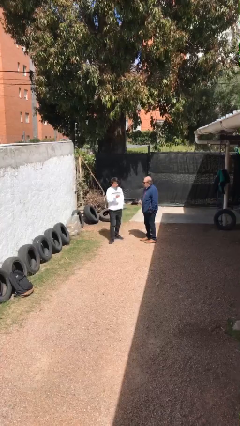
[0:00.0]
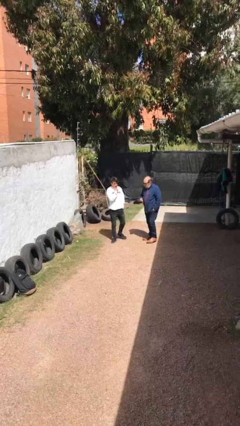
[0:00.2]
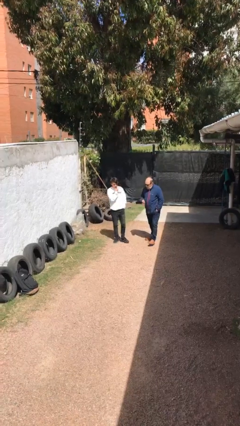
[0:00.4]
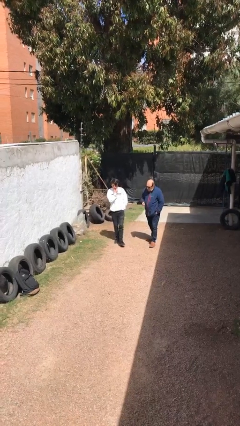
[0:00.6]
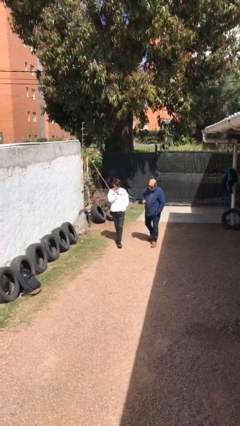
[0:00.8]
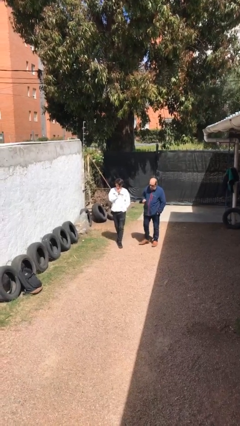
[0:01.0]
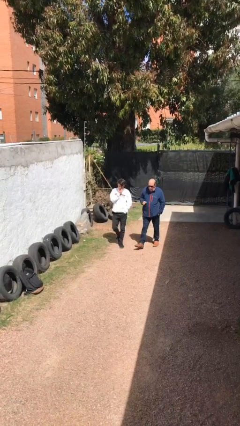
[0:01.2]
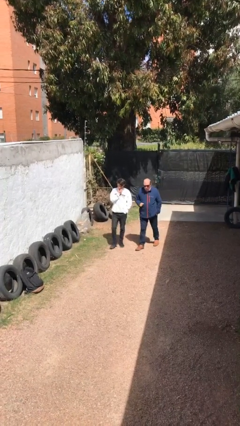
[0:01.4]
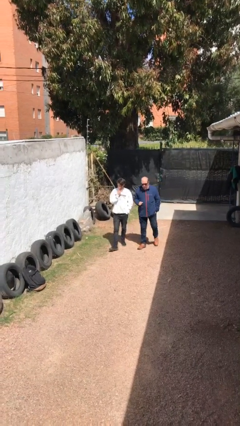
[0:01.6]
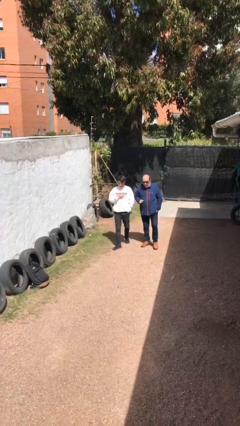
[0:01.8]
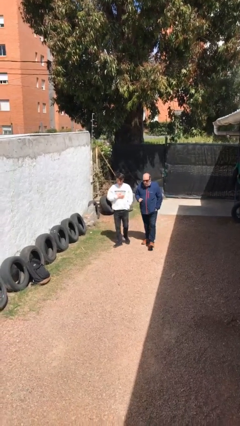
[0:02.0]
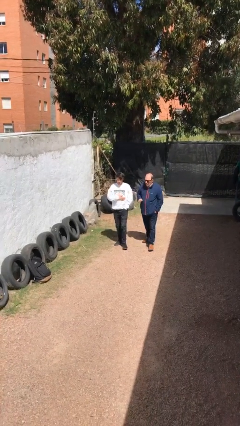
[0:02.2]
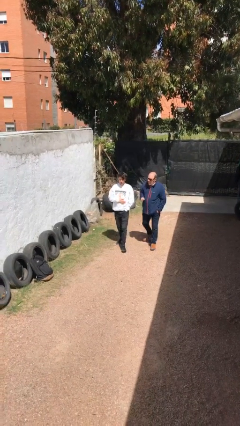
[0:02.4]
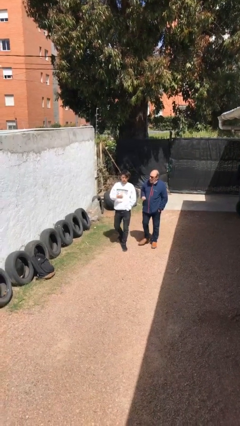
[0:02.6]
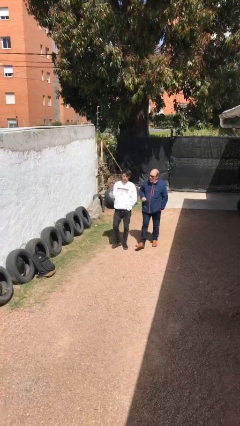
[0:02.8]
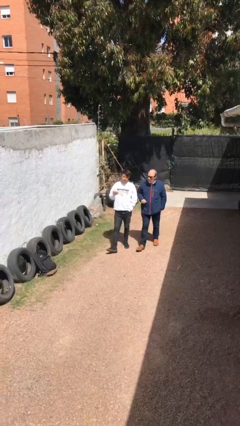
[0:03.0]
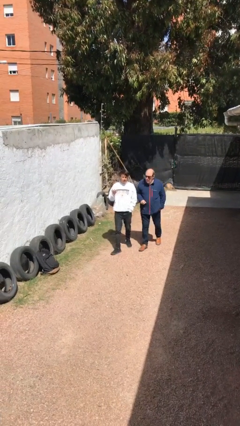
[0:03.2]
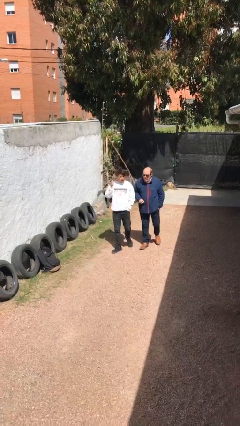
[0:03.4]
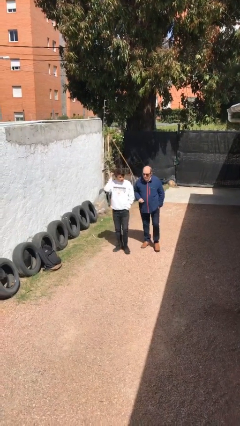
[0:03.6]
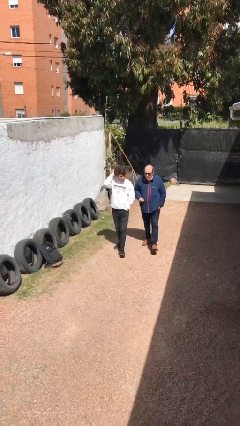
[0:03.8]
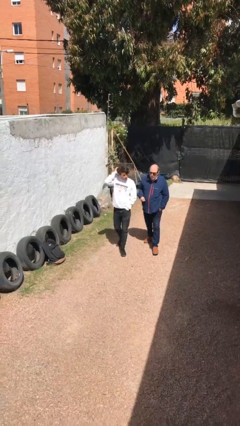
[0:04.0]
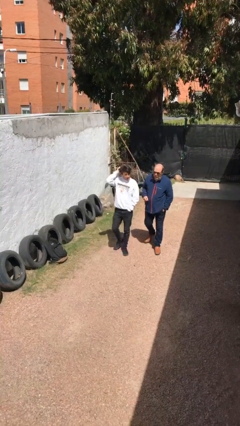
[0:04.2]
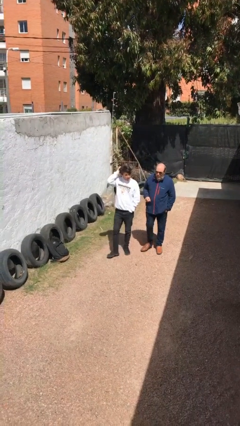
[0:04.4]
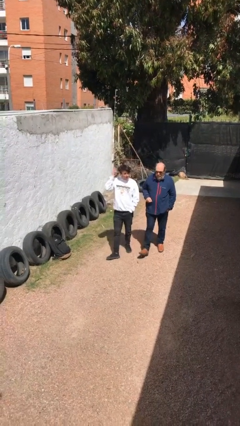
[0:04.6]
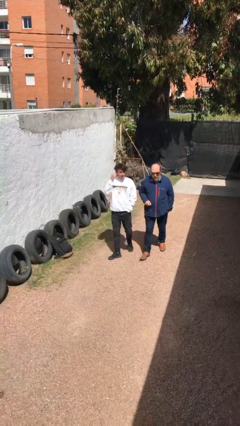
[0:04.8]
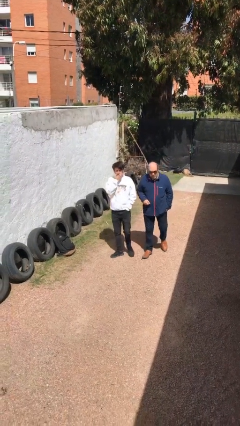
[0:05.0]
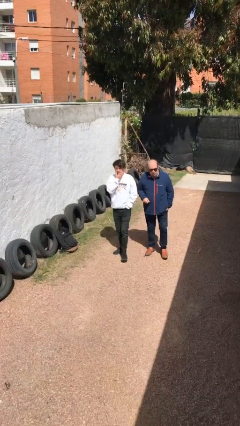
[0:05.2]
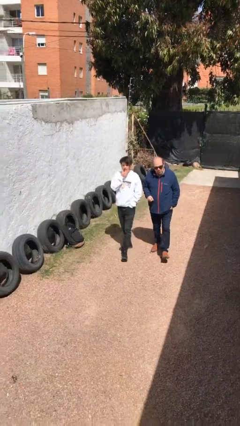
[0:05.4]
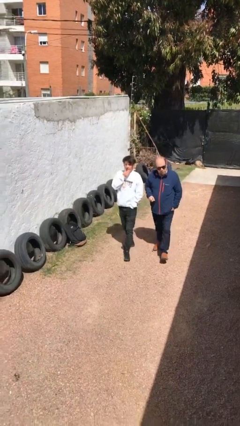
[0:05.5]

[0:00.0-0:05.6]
person talks to person

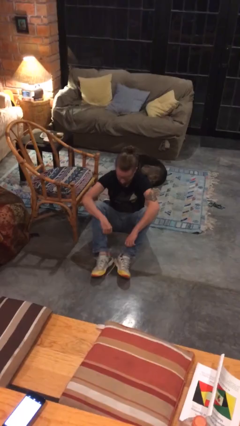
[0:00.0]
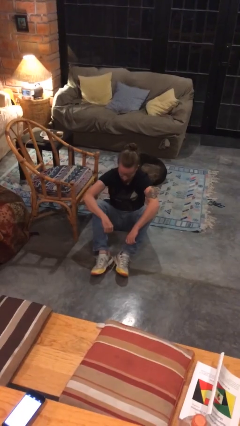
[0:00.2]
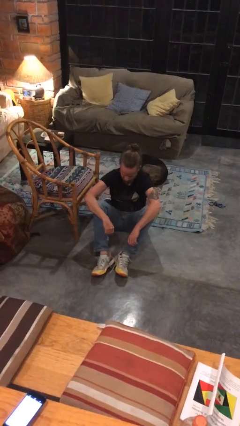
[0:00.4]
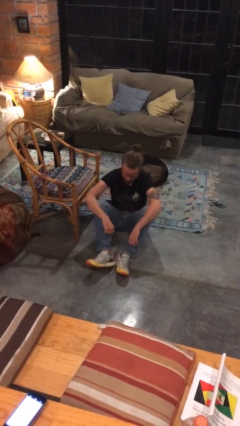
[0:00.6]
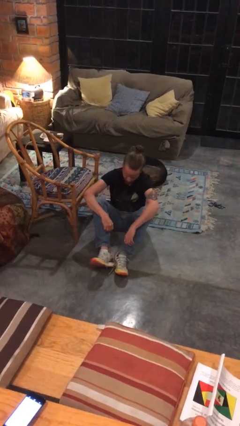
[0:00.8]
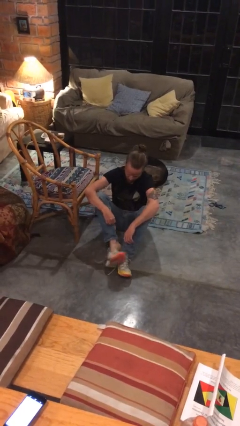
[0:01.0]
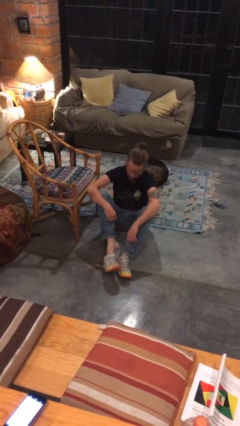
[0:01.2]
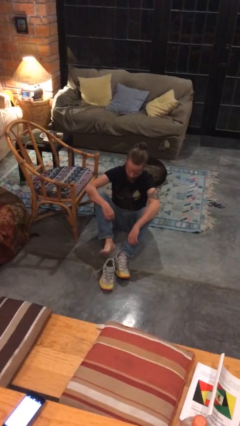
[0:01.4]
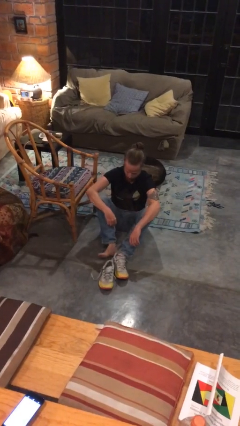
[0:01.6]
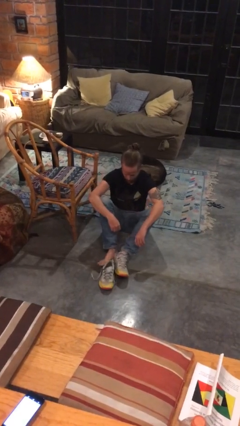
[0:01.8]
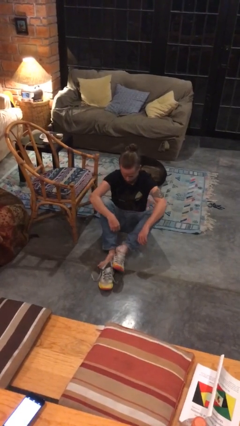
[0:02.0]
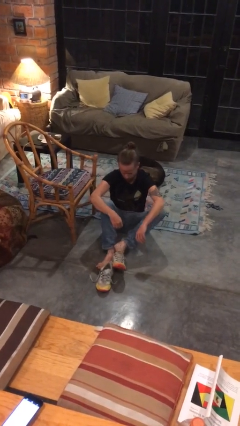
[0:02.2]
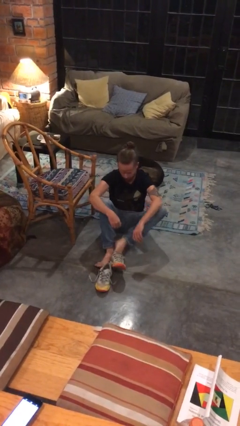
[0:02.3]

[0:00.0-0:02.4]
person takes off shoes

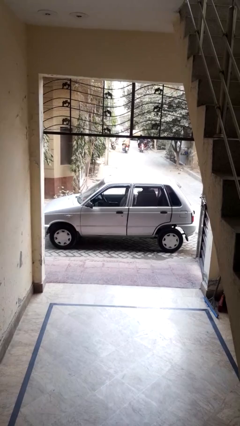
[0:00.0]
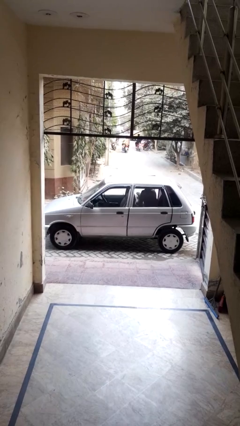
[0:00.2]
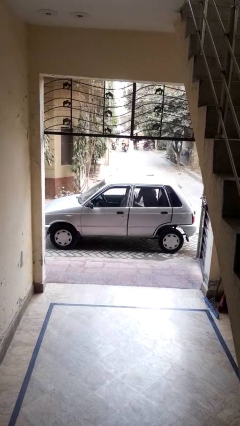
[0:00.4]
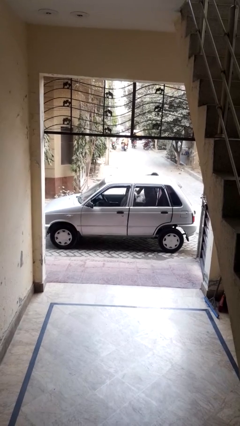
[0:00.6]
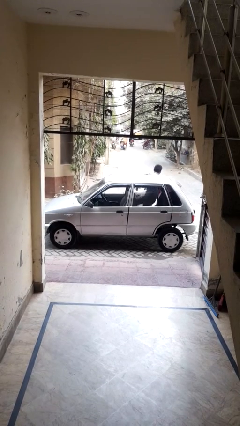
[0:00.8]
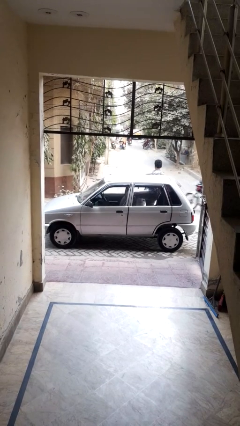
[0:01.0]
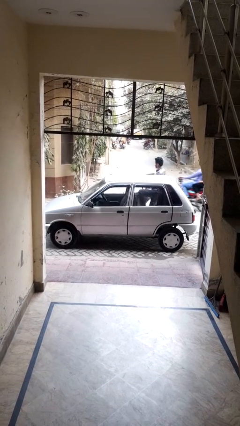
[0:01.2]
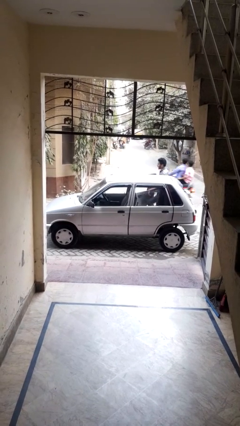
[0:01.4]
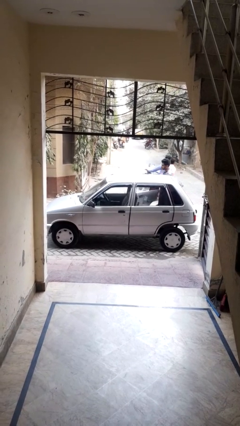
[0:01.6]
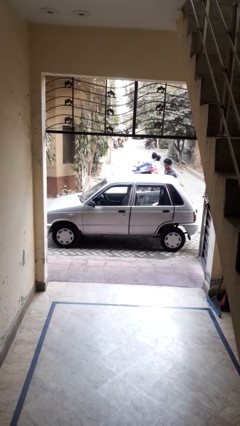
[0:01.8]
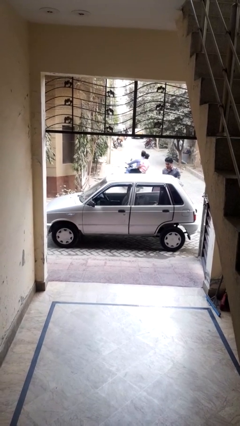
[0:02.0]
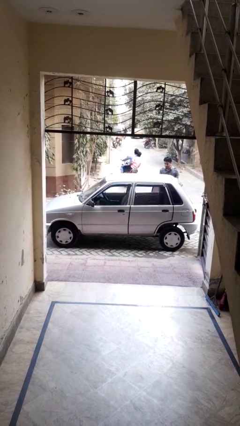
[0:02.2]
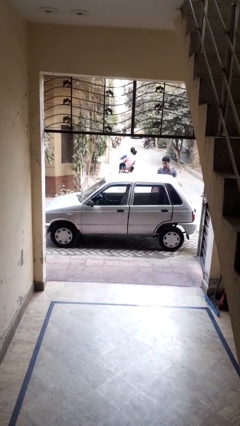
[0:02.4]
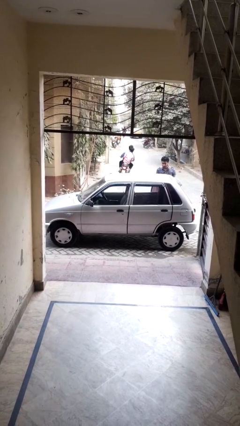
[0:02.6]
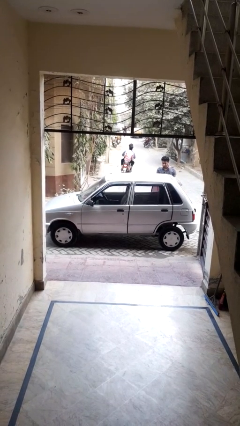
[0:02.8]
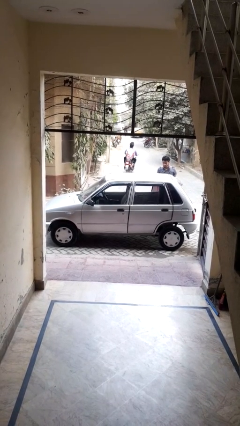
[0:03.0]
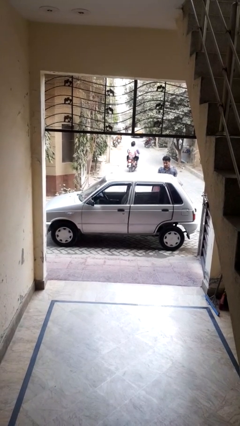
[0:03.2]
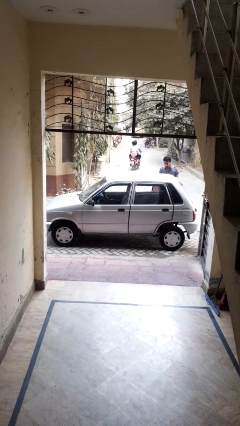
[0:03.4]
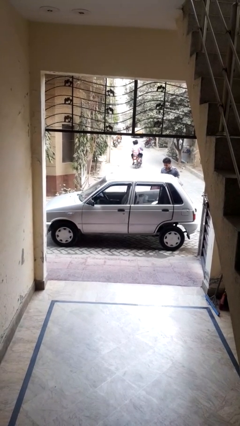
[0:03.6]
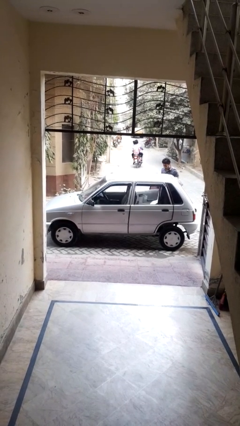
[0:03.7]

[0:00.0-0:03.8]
car drops off person

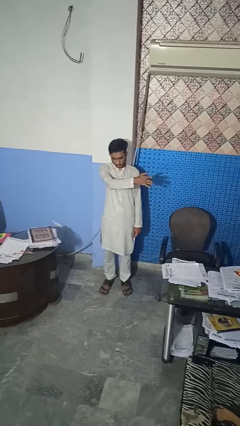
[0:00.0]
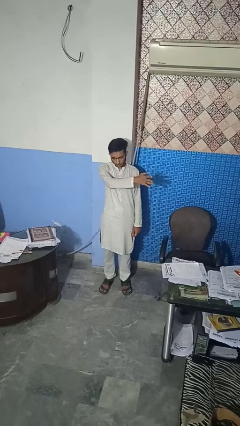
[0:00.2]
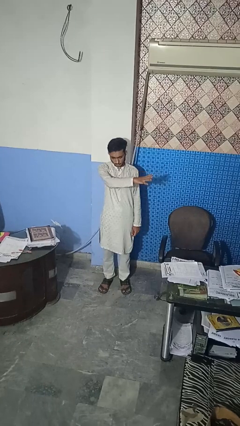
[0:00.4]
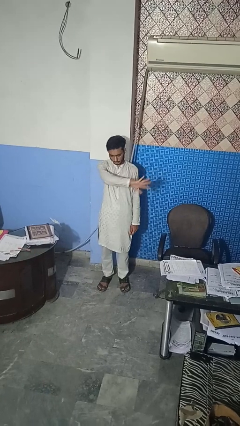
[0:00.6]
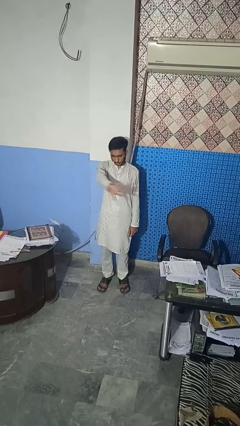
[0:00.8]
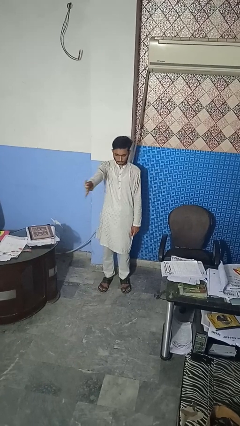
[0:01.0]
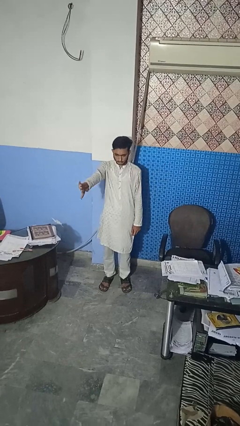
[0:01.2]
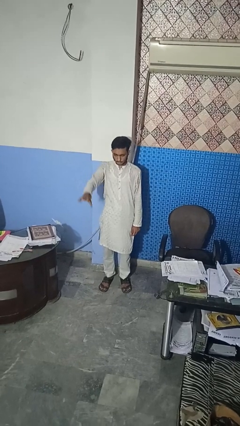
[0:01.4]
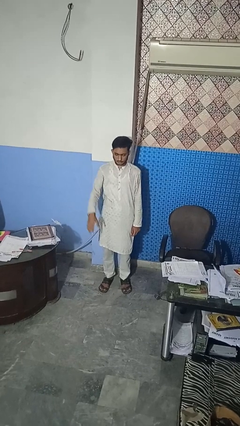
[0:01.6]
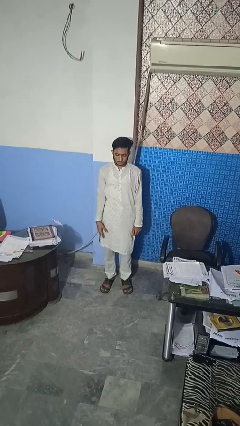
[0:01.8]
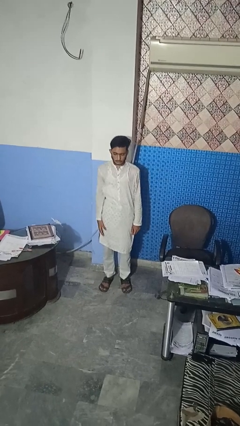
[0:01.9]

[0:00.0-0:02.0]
person gestures swipe right

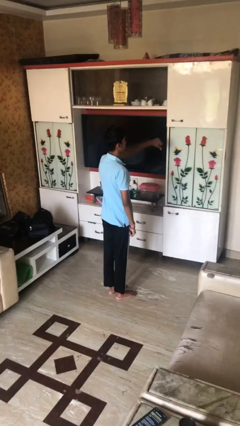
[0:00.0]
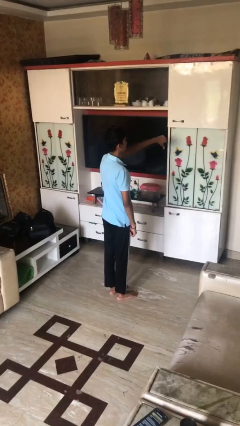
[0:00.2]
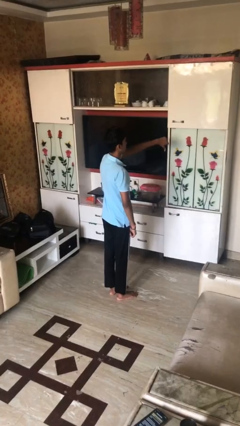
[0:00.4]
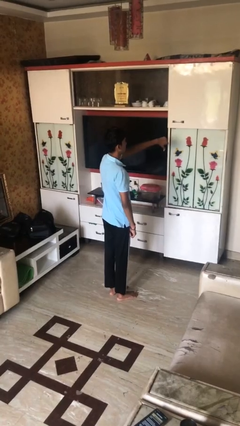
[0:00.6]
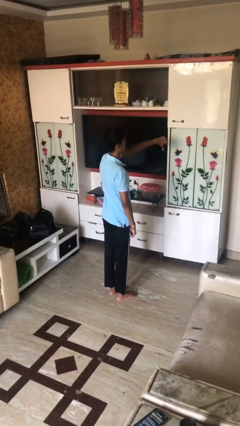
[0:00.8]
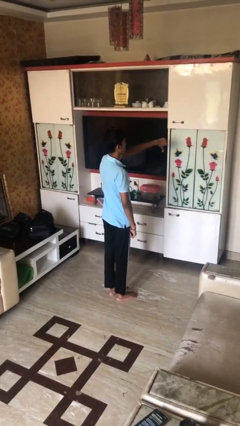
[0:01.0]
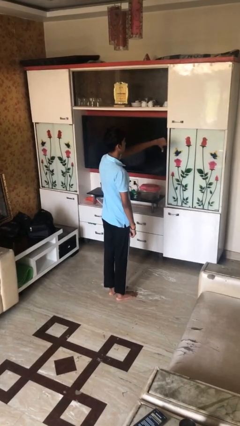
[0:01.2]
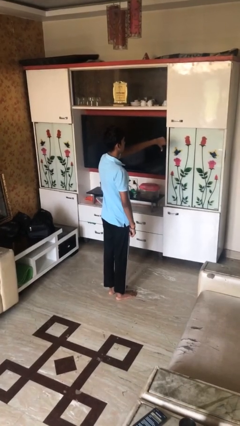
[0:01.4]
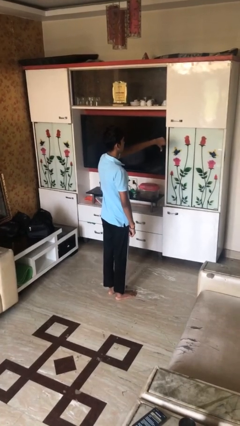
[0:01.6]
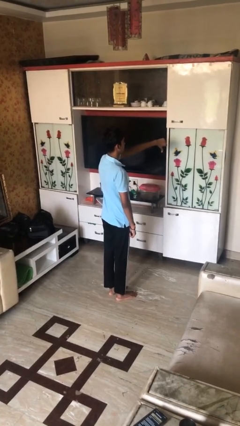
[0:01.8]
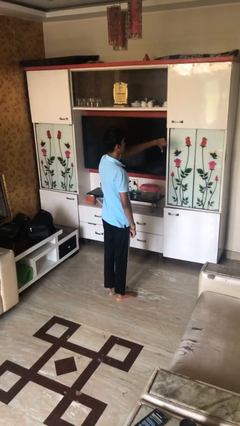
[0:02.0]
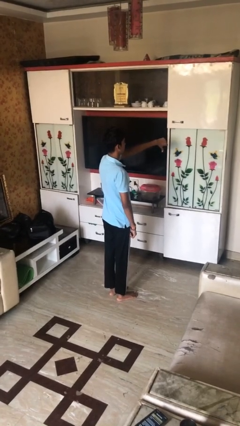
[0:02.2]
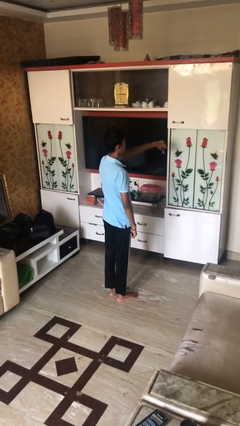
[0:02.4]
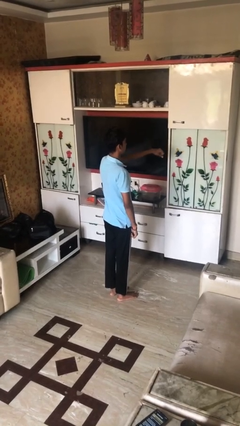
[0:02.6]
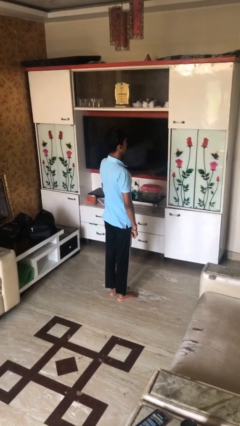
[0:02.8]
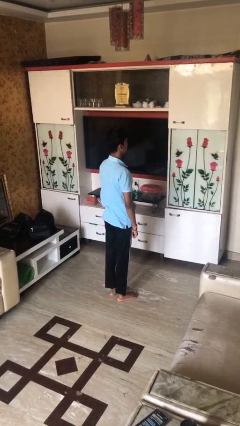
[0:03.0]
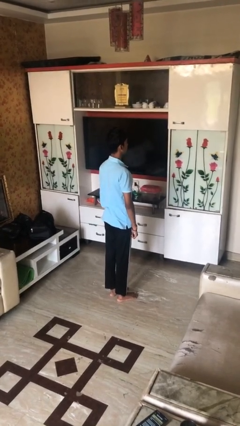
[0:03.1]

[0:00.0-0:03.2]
person gestures thumbs down

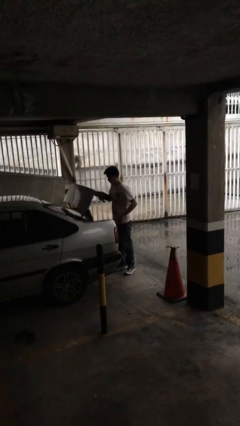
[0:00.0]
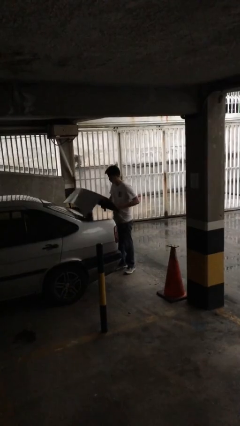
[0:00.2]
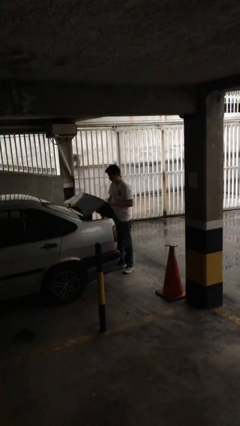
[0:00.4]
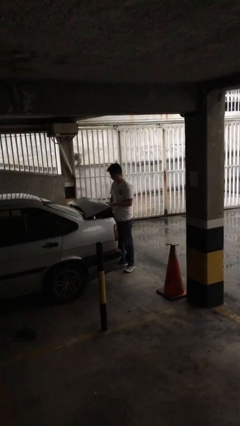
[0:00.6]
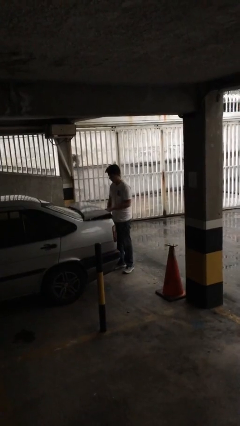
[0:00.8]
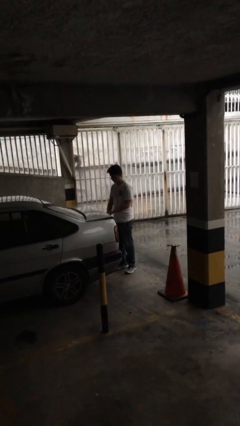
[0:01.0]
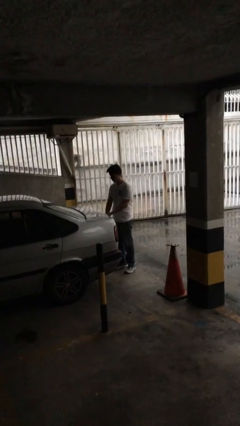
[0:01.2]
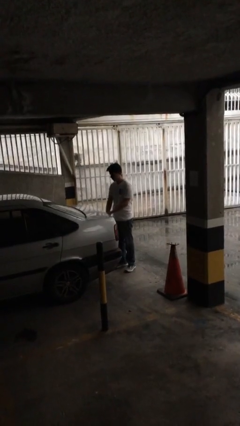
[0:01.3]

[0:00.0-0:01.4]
person closes car trunk
